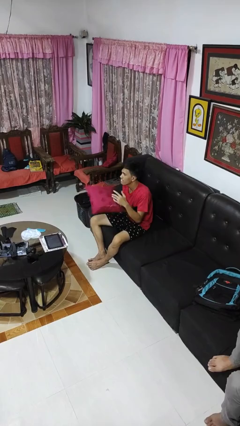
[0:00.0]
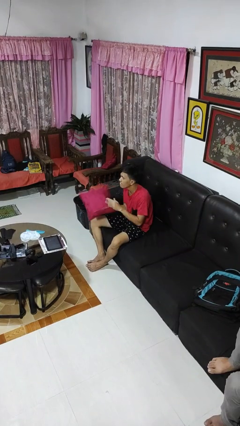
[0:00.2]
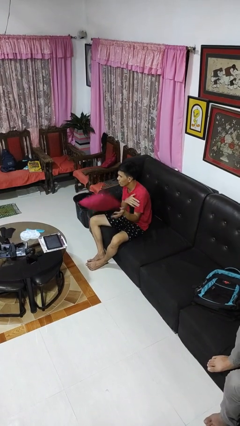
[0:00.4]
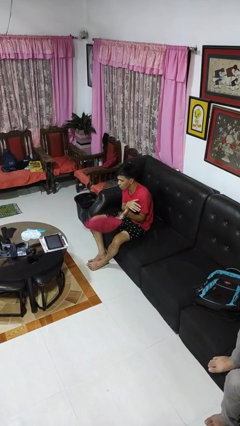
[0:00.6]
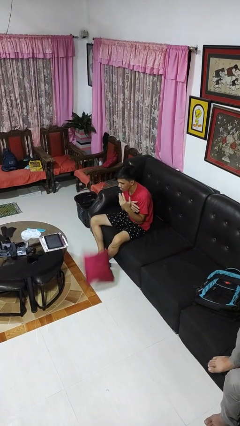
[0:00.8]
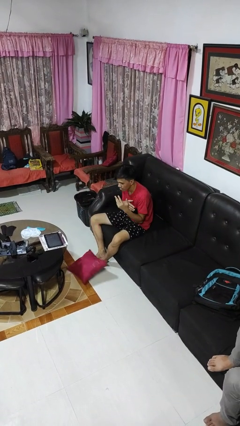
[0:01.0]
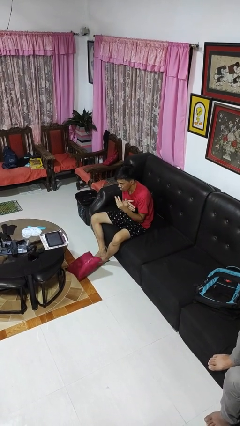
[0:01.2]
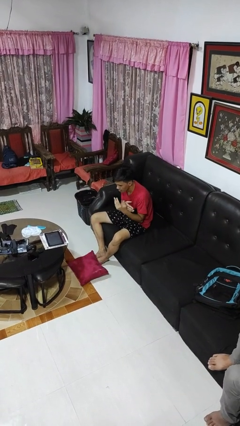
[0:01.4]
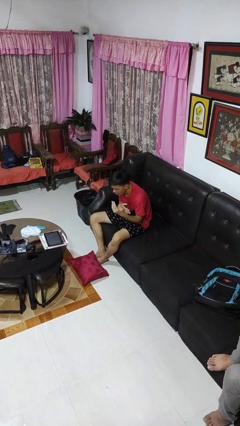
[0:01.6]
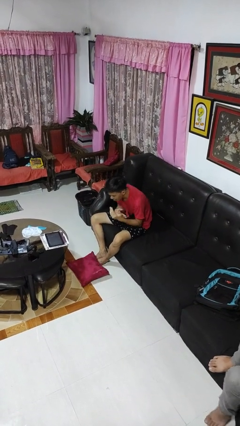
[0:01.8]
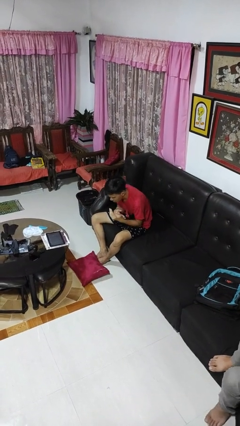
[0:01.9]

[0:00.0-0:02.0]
person drops object

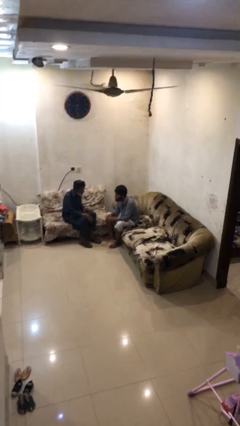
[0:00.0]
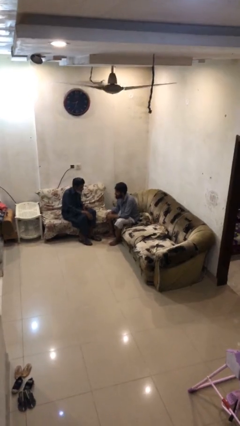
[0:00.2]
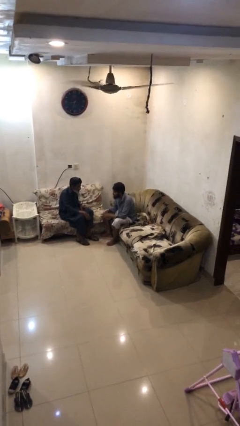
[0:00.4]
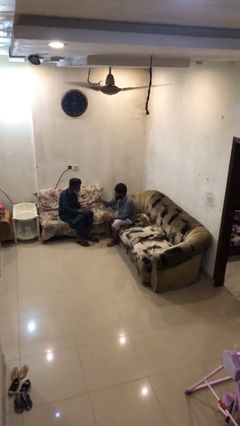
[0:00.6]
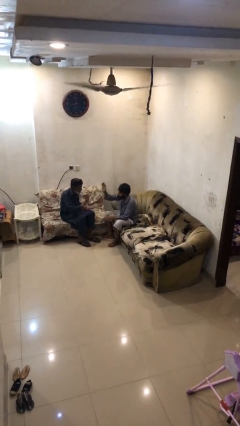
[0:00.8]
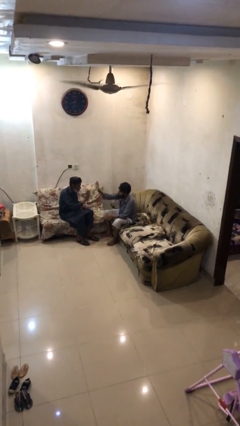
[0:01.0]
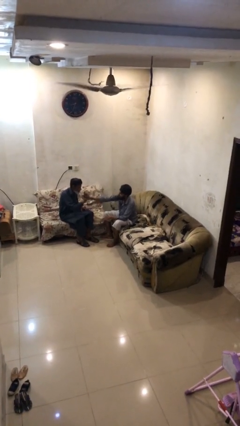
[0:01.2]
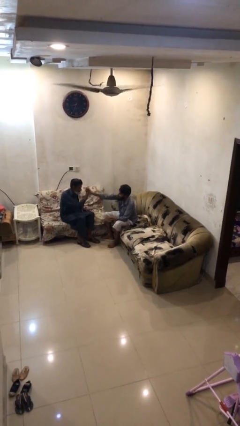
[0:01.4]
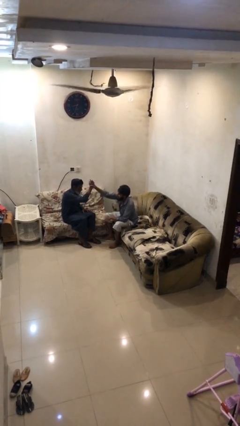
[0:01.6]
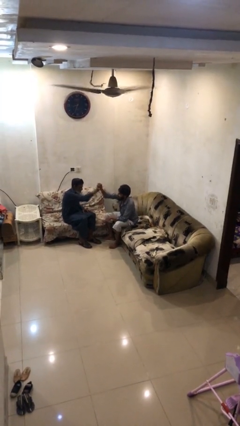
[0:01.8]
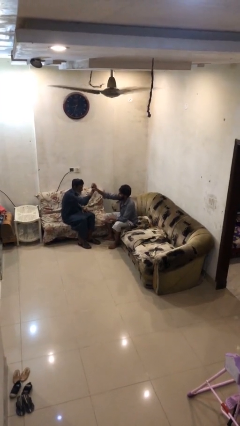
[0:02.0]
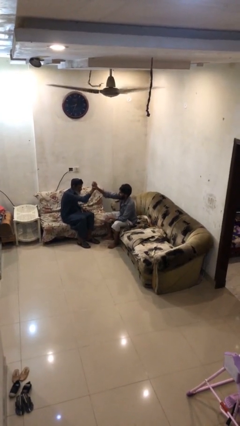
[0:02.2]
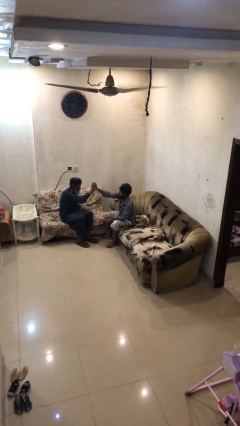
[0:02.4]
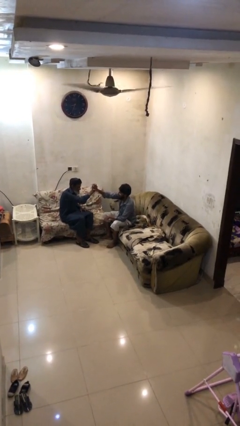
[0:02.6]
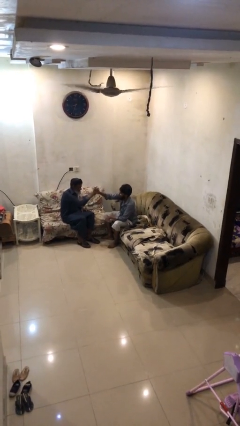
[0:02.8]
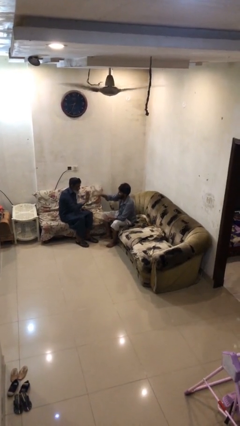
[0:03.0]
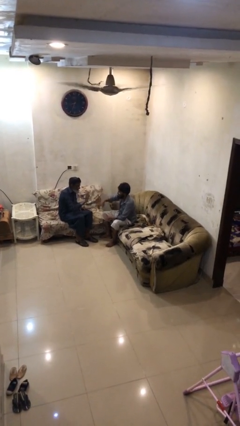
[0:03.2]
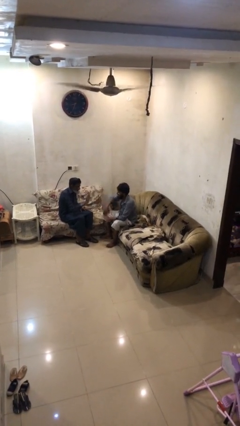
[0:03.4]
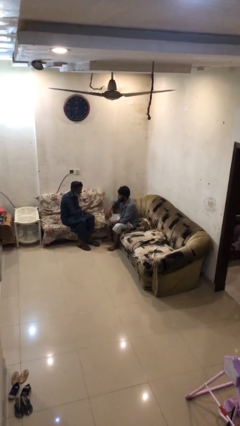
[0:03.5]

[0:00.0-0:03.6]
person highfives hand

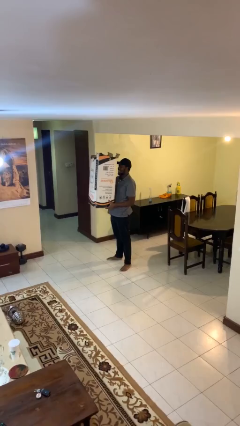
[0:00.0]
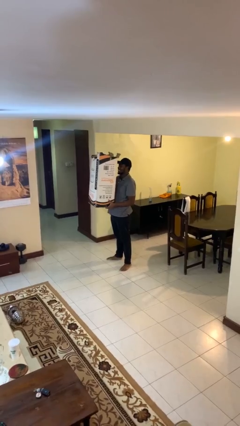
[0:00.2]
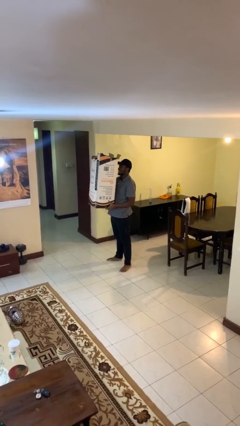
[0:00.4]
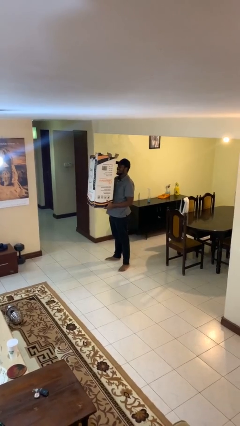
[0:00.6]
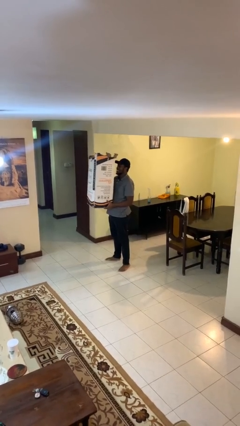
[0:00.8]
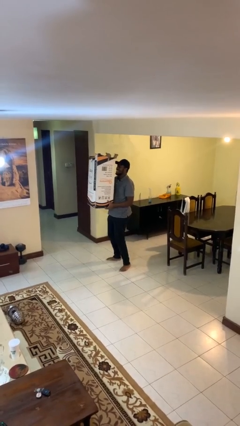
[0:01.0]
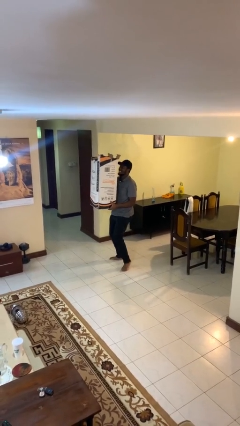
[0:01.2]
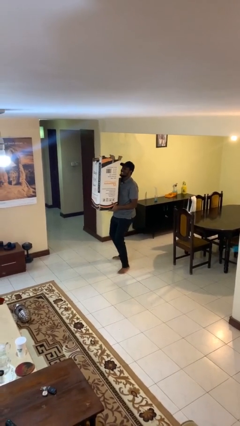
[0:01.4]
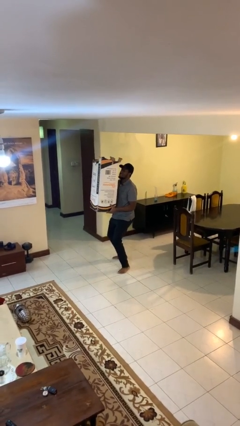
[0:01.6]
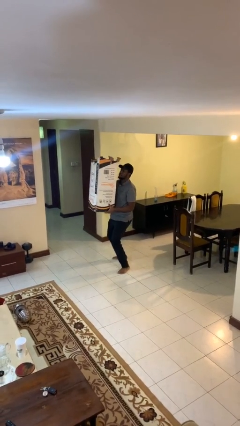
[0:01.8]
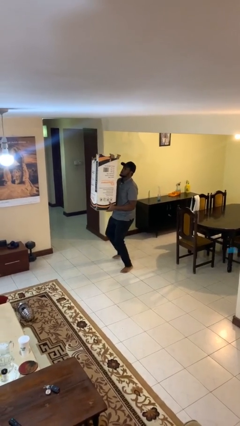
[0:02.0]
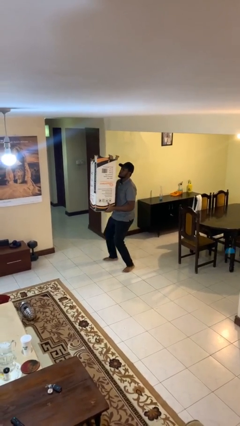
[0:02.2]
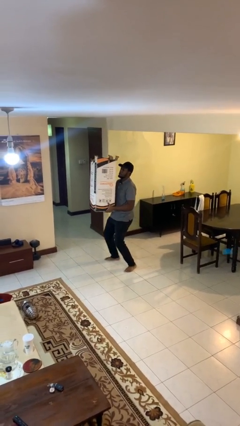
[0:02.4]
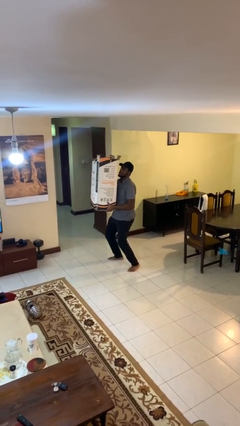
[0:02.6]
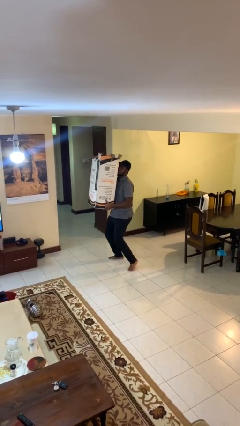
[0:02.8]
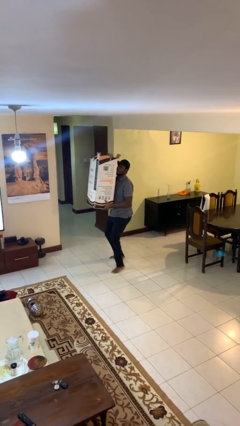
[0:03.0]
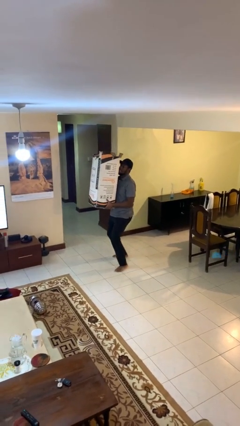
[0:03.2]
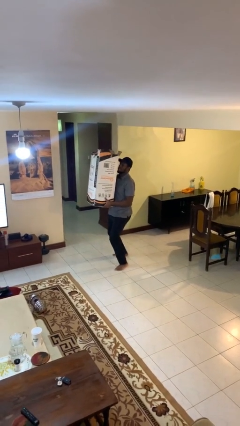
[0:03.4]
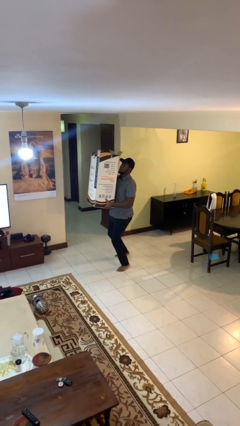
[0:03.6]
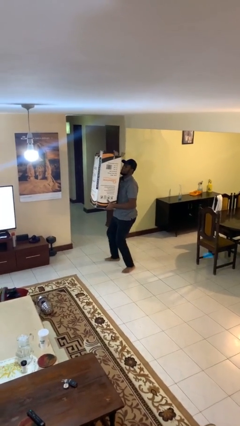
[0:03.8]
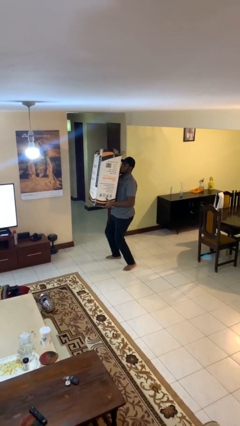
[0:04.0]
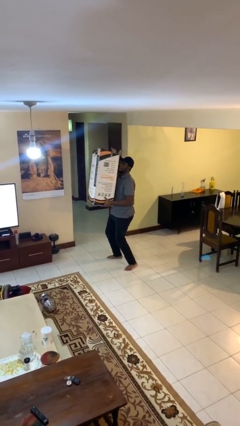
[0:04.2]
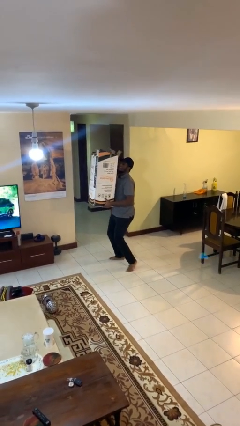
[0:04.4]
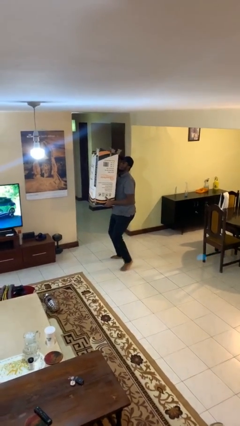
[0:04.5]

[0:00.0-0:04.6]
person carries heavy object

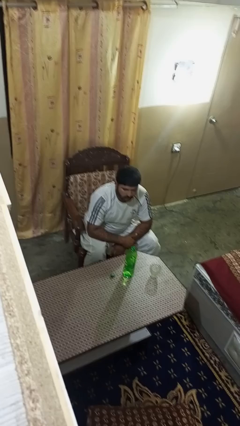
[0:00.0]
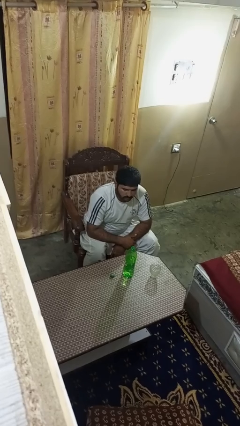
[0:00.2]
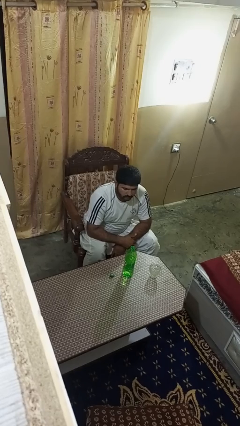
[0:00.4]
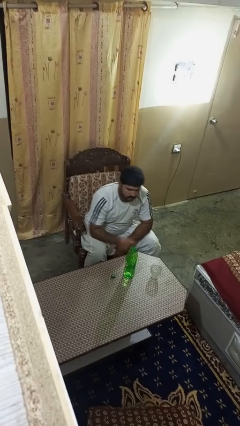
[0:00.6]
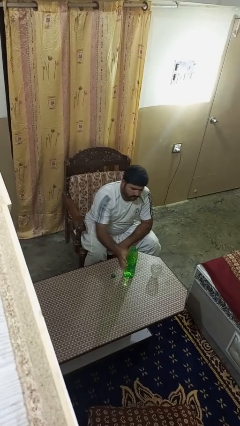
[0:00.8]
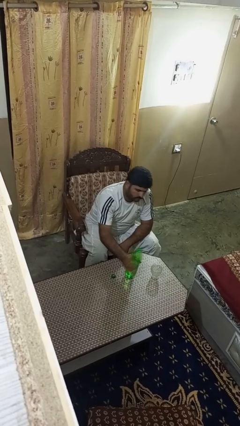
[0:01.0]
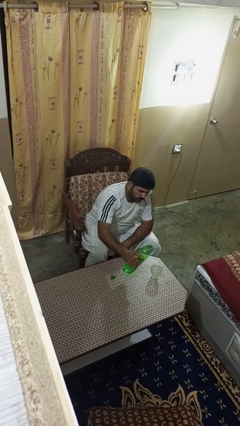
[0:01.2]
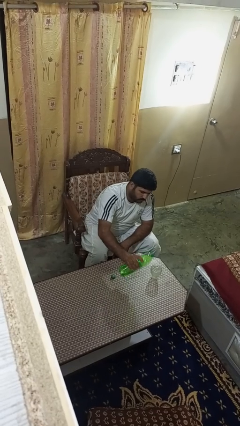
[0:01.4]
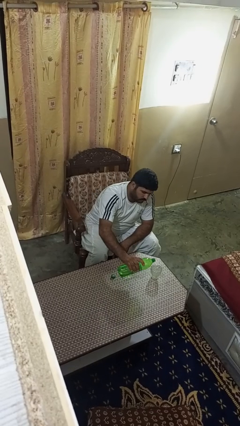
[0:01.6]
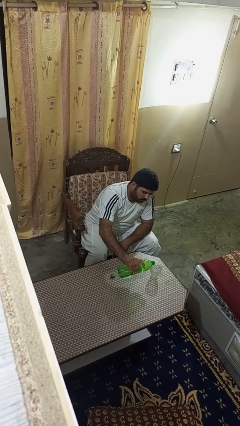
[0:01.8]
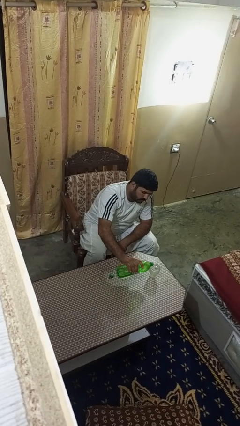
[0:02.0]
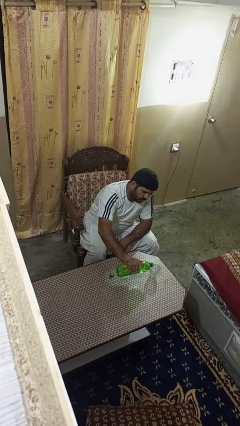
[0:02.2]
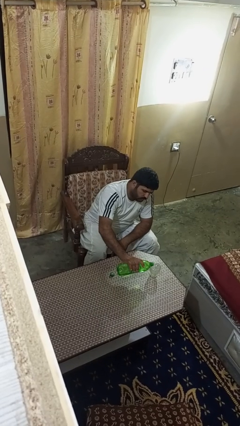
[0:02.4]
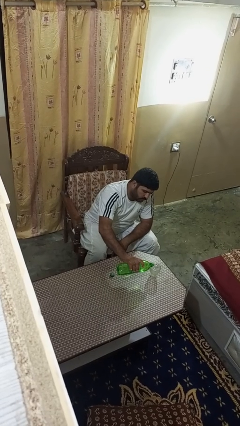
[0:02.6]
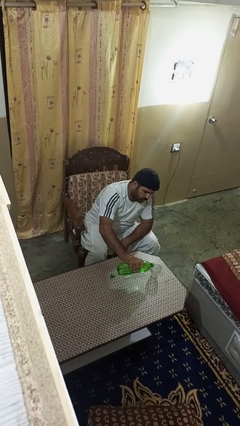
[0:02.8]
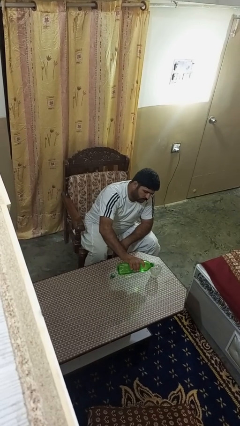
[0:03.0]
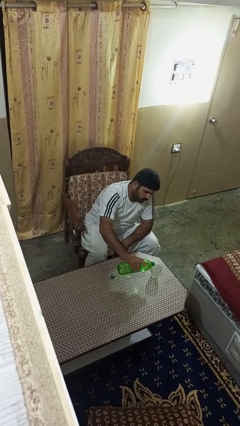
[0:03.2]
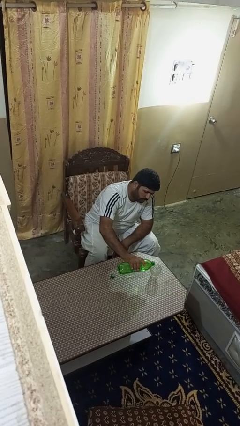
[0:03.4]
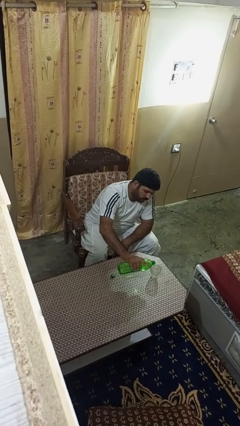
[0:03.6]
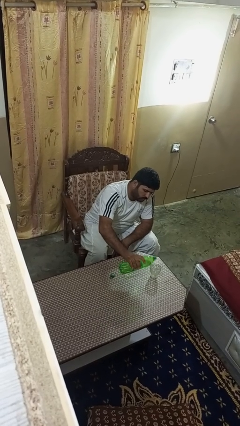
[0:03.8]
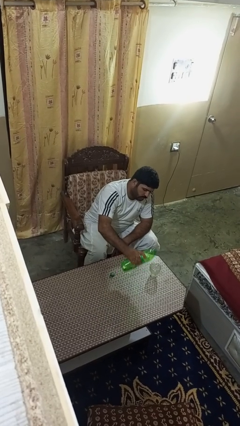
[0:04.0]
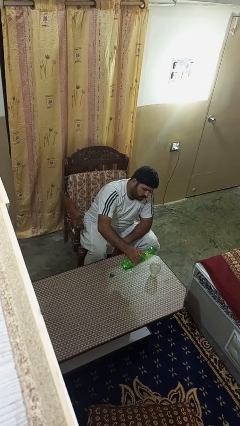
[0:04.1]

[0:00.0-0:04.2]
person pours liquid into cup

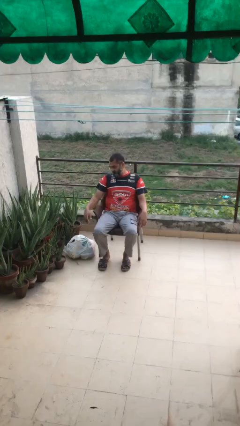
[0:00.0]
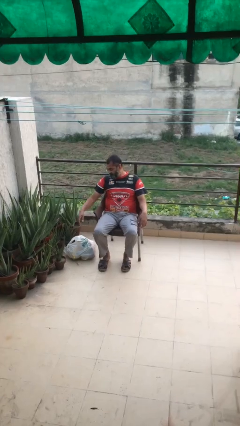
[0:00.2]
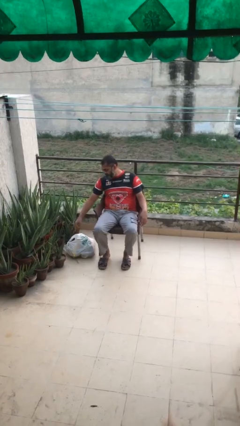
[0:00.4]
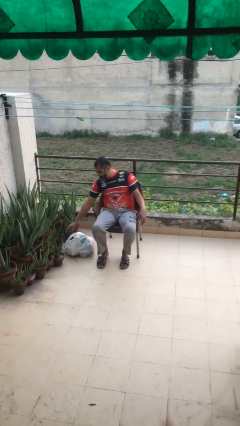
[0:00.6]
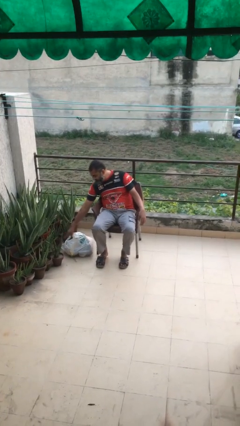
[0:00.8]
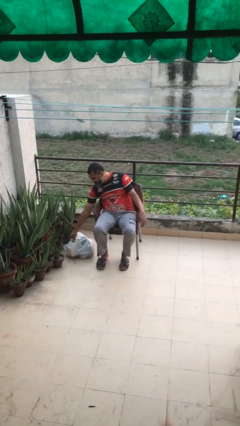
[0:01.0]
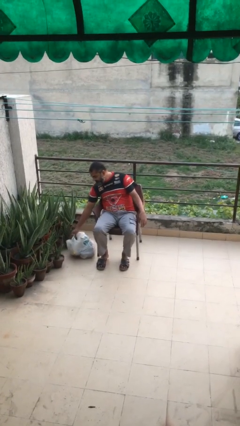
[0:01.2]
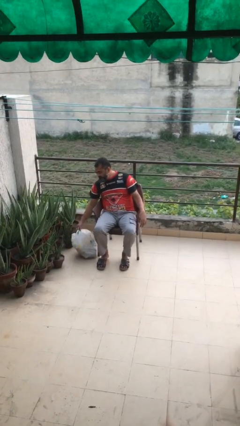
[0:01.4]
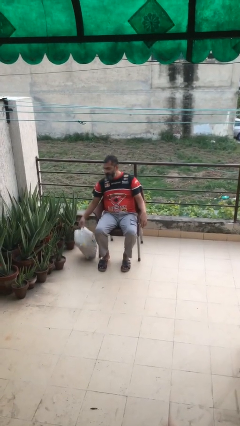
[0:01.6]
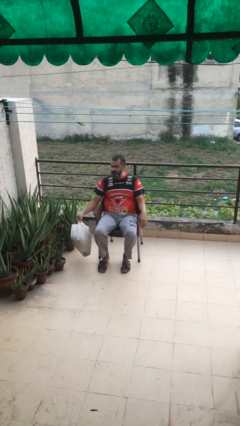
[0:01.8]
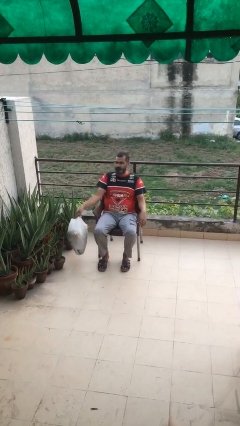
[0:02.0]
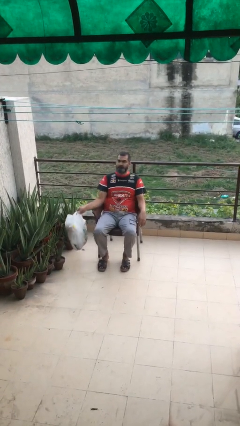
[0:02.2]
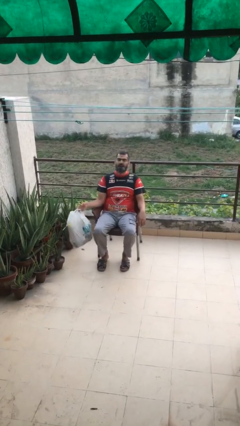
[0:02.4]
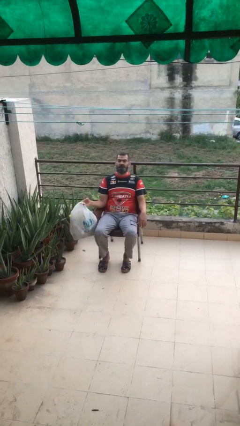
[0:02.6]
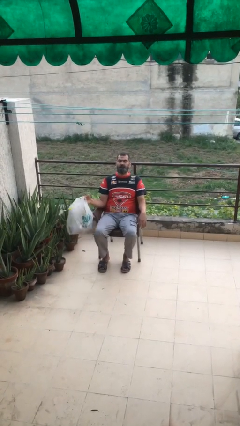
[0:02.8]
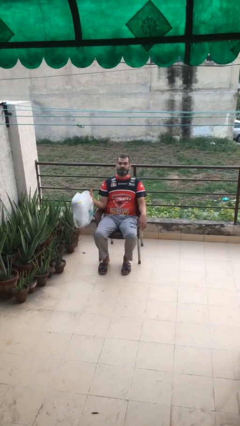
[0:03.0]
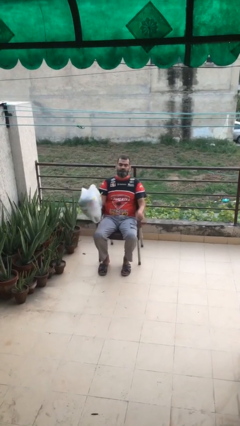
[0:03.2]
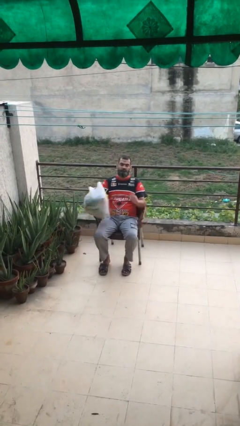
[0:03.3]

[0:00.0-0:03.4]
person picks up object from floor
